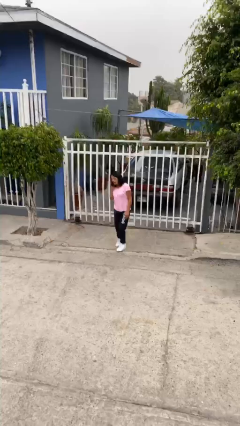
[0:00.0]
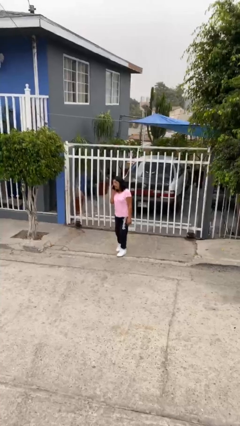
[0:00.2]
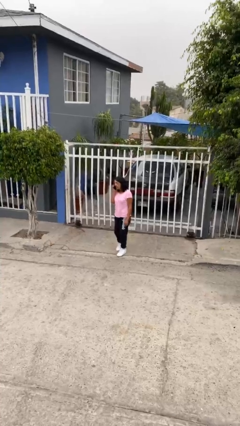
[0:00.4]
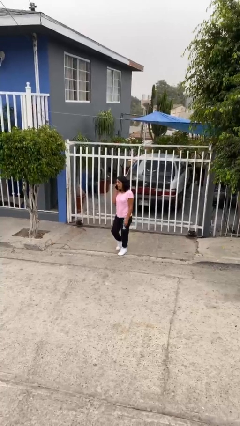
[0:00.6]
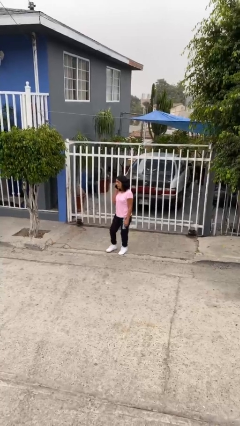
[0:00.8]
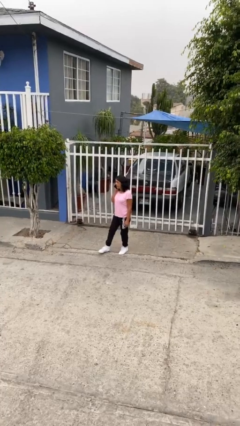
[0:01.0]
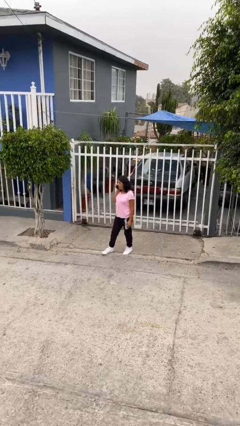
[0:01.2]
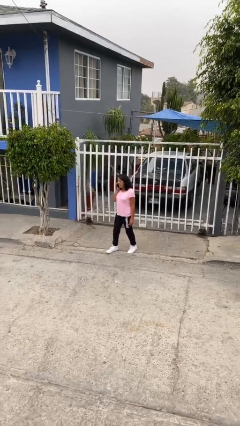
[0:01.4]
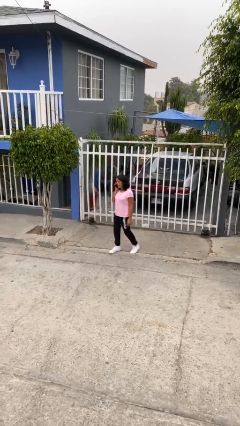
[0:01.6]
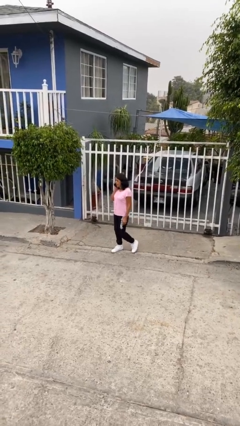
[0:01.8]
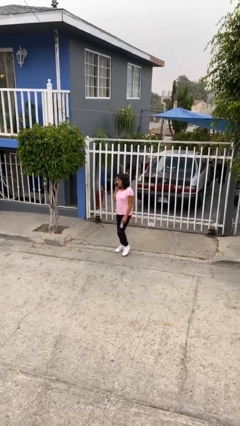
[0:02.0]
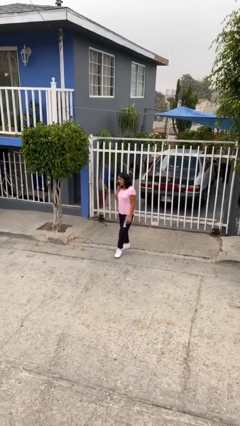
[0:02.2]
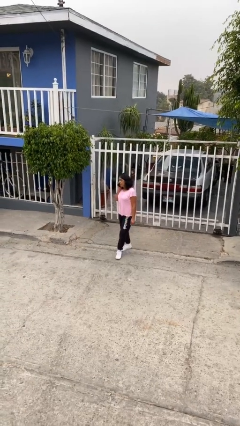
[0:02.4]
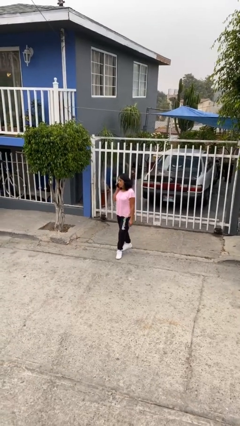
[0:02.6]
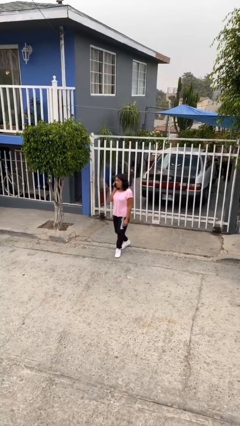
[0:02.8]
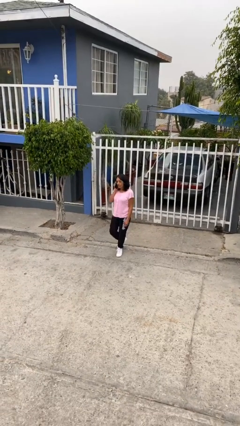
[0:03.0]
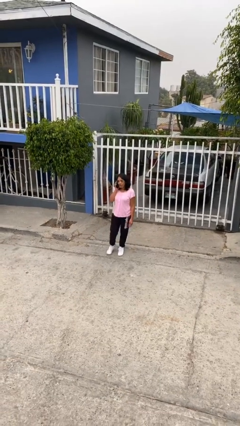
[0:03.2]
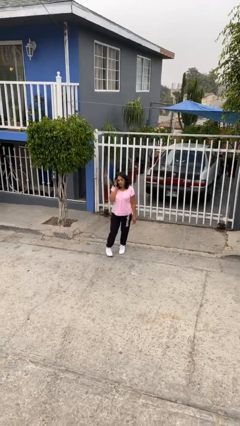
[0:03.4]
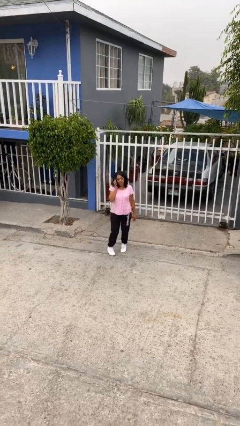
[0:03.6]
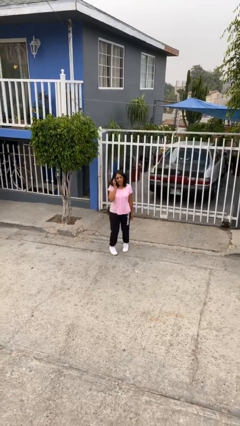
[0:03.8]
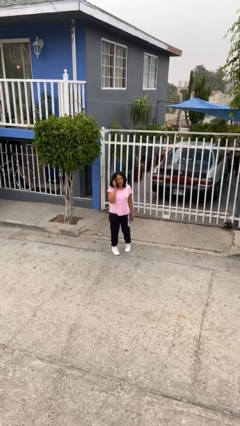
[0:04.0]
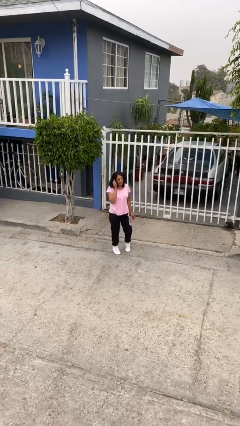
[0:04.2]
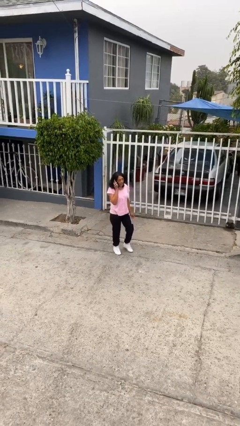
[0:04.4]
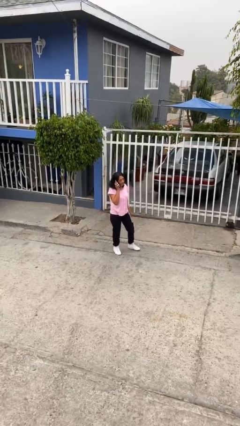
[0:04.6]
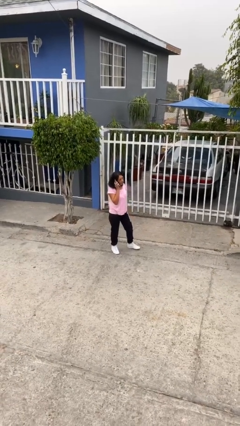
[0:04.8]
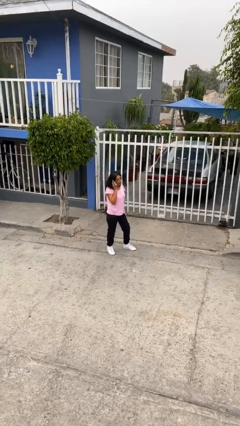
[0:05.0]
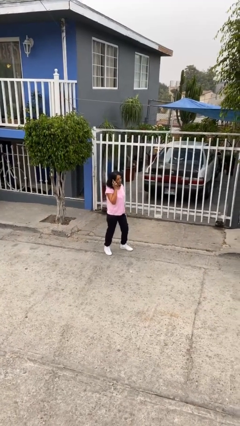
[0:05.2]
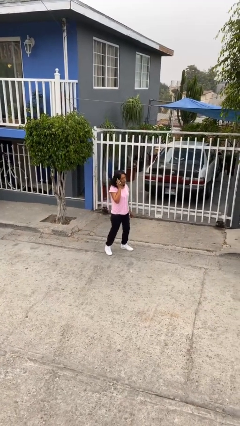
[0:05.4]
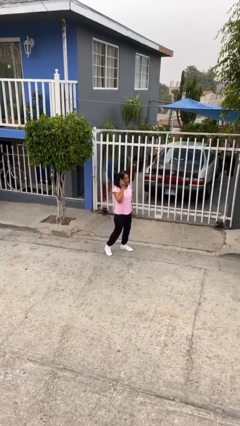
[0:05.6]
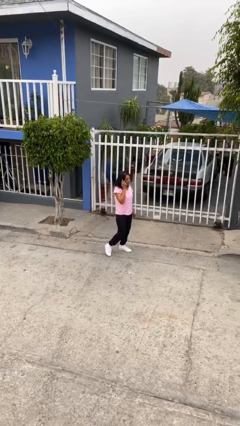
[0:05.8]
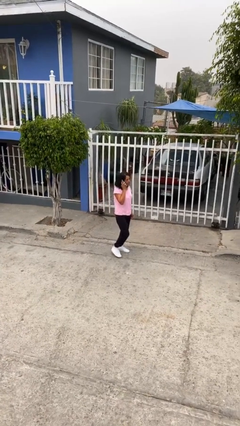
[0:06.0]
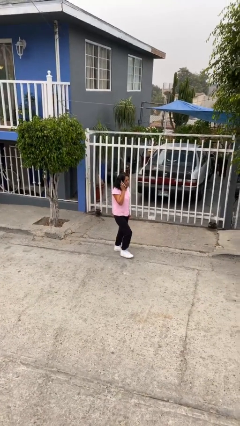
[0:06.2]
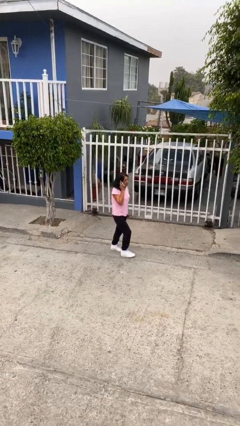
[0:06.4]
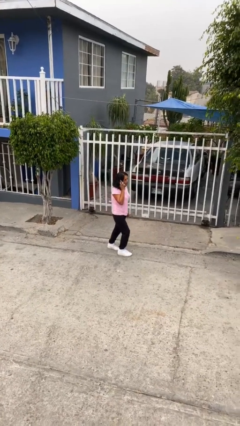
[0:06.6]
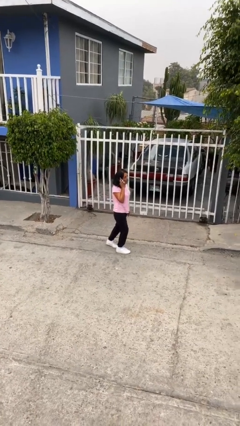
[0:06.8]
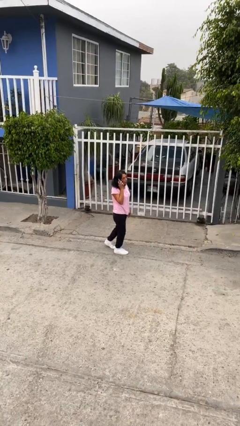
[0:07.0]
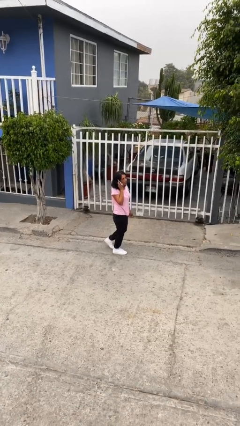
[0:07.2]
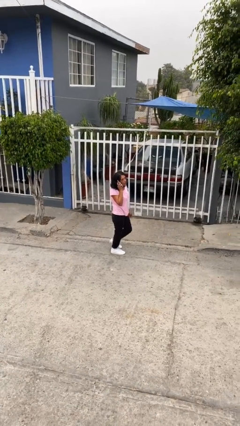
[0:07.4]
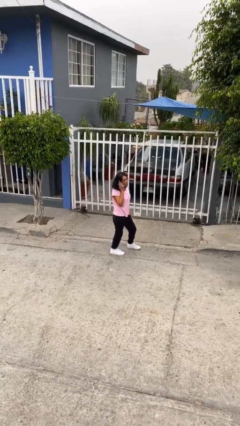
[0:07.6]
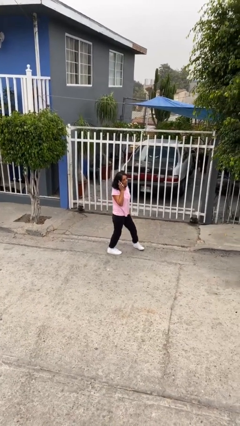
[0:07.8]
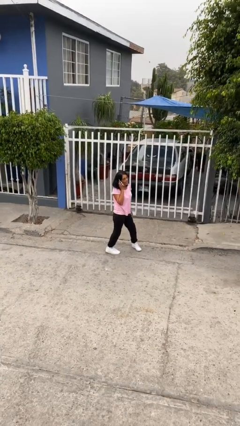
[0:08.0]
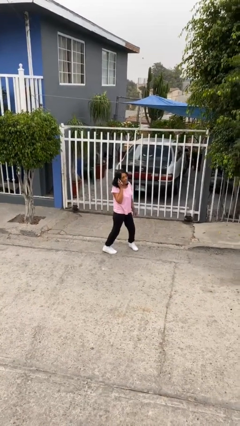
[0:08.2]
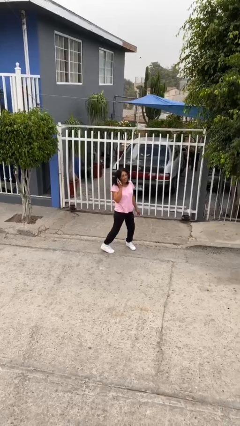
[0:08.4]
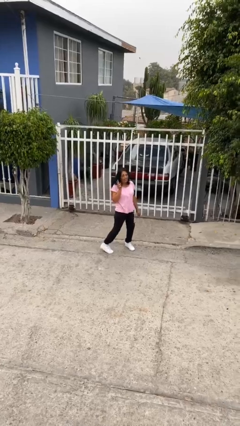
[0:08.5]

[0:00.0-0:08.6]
person talks on phone

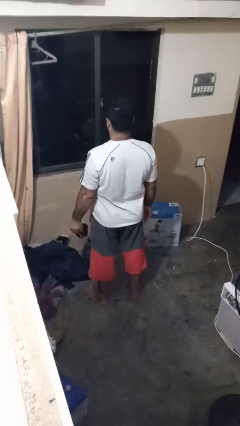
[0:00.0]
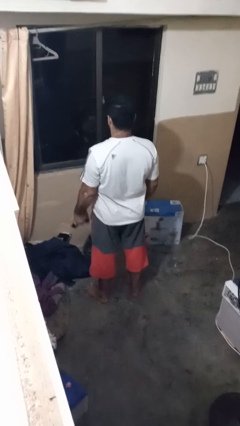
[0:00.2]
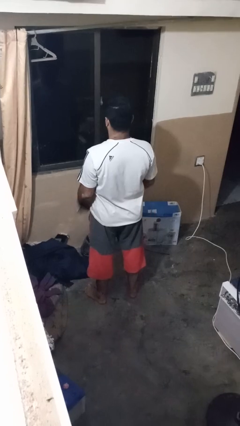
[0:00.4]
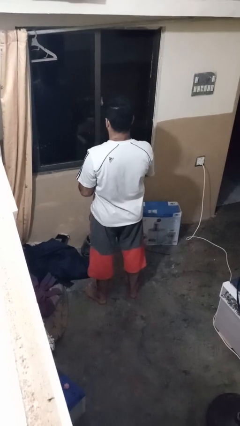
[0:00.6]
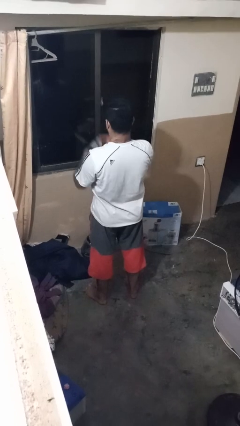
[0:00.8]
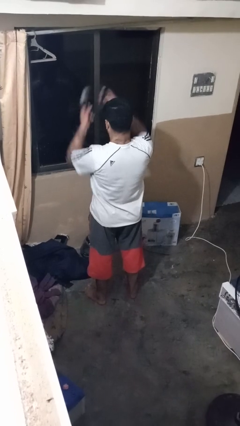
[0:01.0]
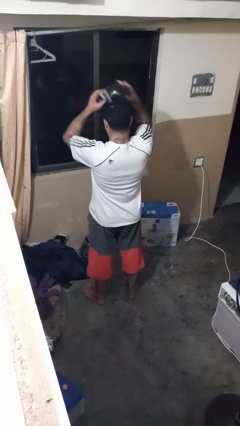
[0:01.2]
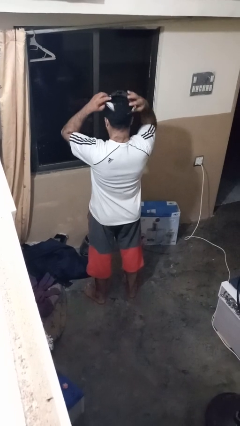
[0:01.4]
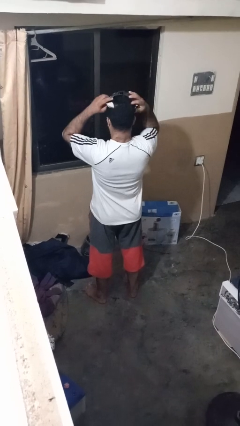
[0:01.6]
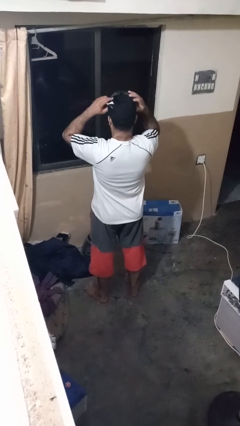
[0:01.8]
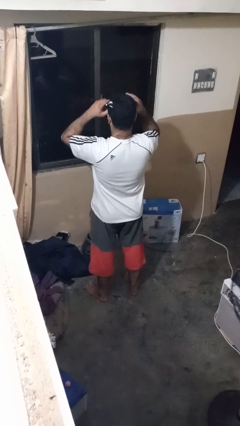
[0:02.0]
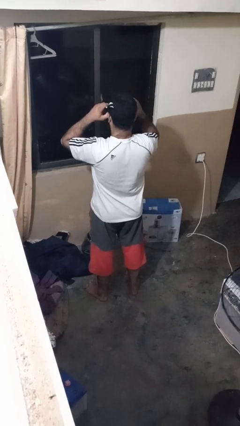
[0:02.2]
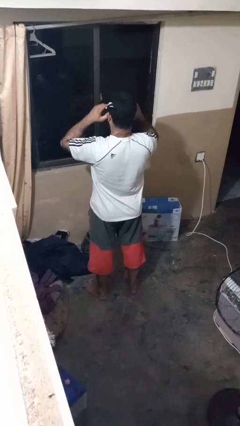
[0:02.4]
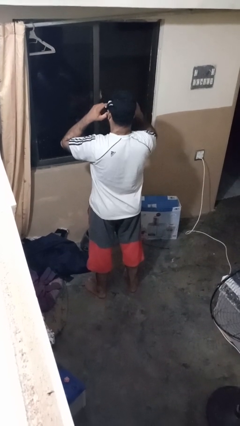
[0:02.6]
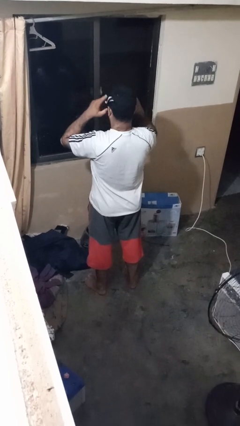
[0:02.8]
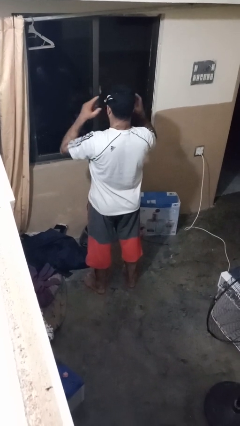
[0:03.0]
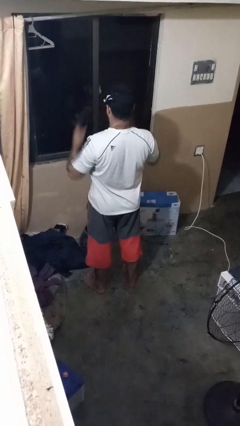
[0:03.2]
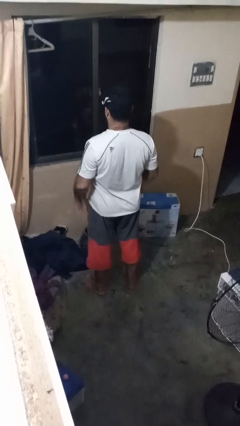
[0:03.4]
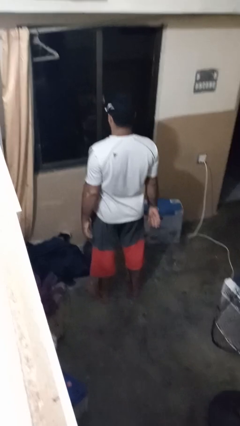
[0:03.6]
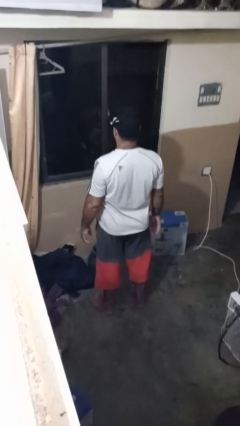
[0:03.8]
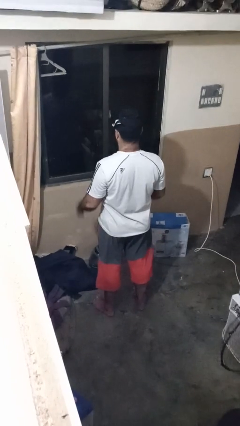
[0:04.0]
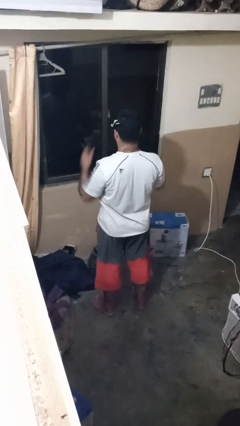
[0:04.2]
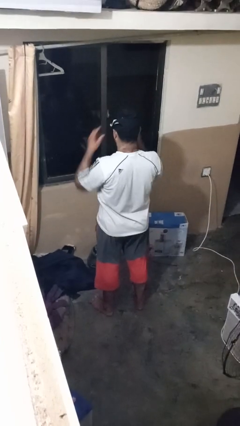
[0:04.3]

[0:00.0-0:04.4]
person puts on sunglasses

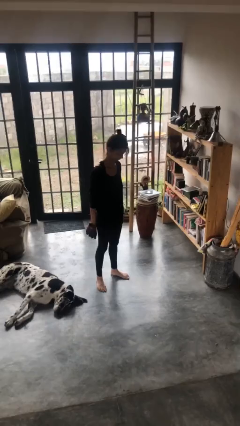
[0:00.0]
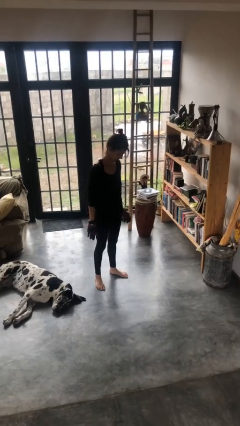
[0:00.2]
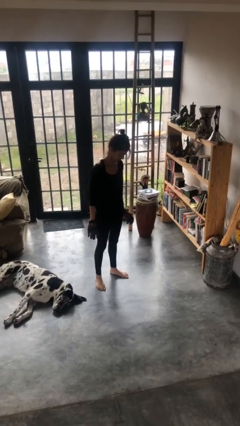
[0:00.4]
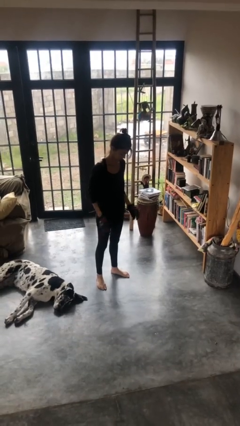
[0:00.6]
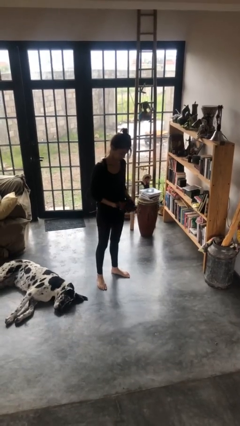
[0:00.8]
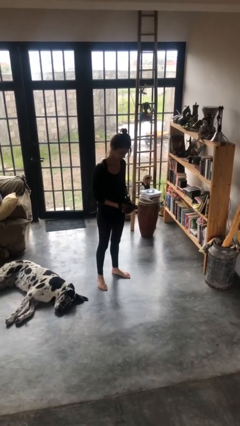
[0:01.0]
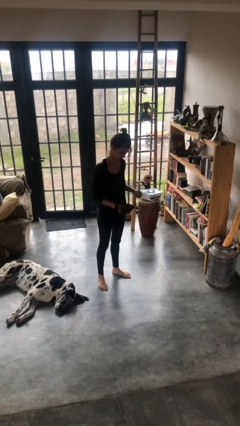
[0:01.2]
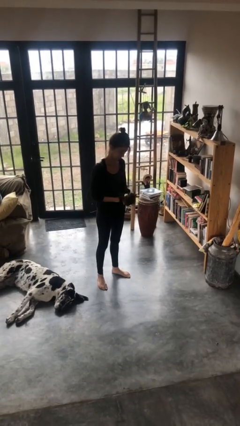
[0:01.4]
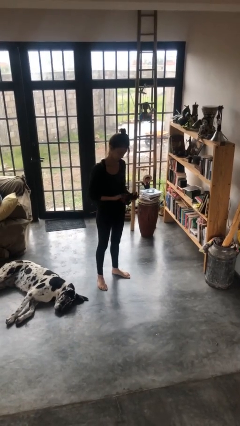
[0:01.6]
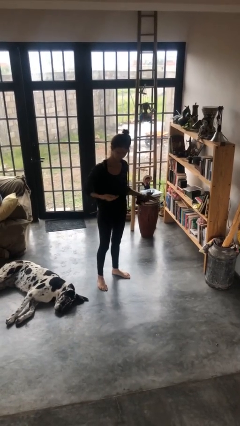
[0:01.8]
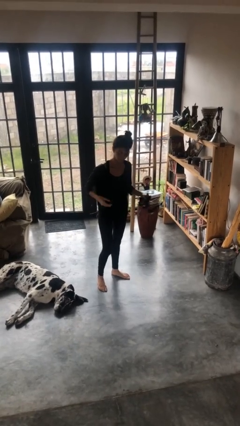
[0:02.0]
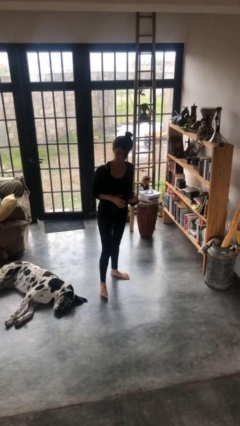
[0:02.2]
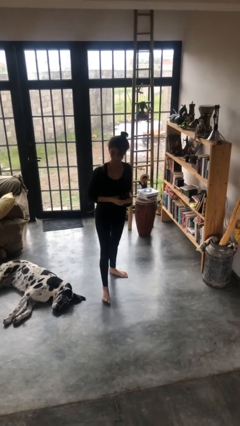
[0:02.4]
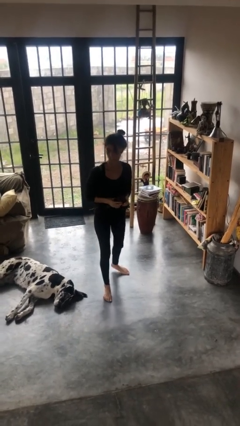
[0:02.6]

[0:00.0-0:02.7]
person takes off gloves

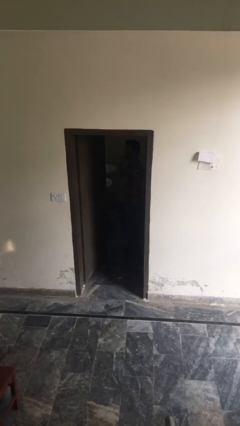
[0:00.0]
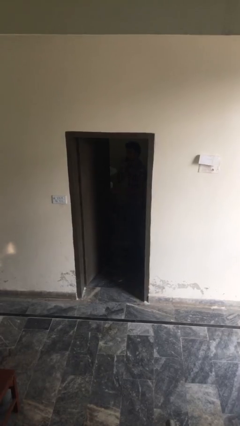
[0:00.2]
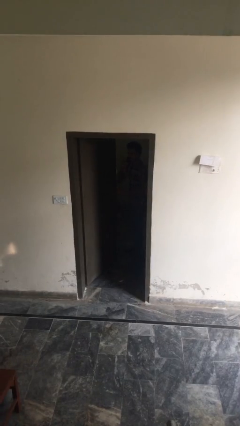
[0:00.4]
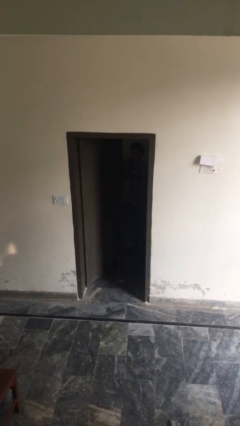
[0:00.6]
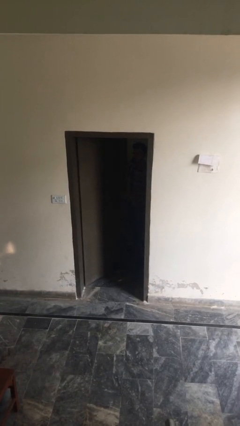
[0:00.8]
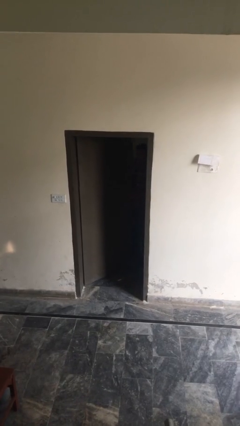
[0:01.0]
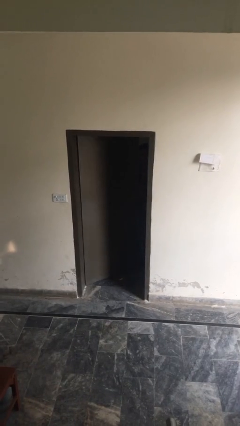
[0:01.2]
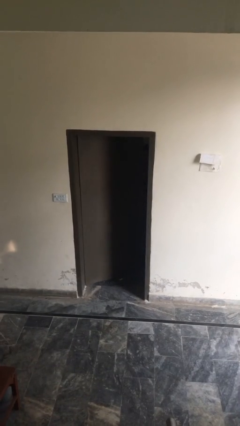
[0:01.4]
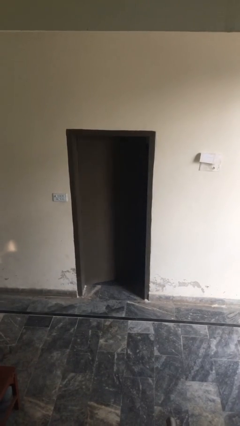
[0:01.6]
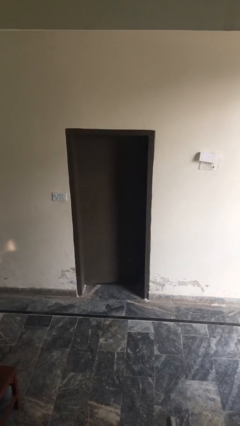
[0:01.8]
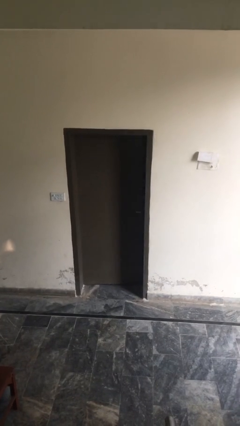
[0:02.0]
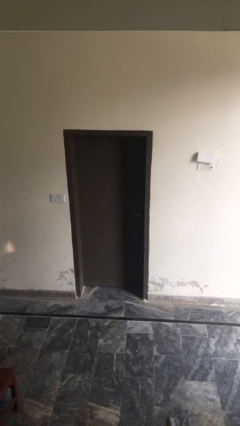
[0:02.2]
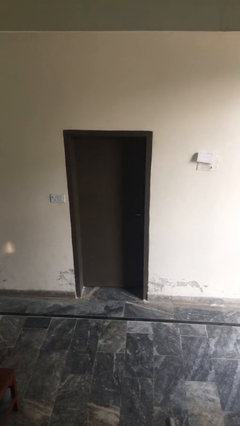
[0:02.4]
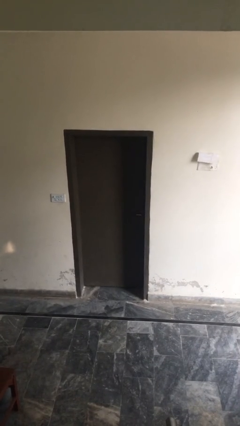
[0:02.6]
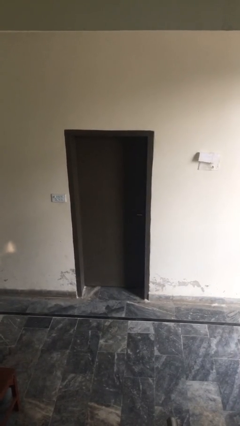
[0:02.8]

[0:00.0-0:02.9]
person closes facility door
